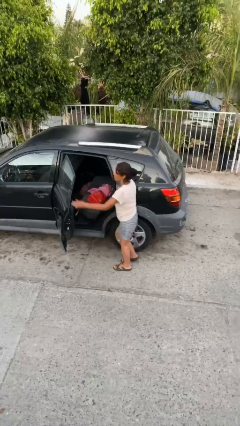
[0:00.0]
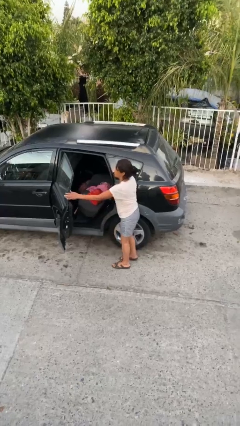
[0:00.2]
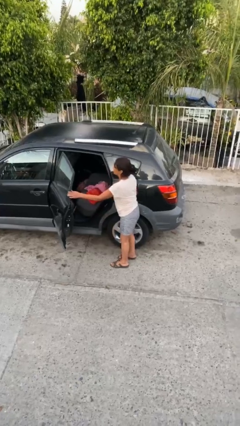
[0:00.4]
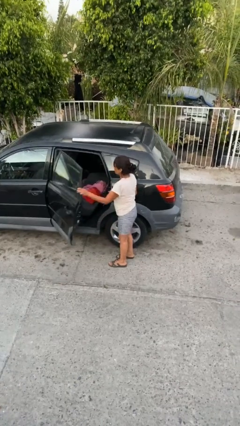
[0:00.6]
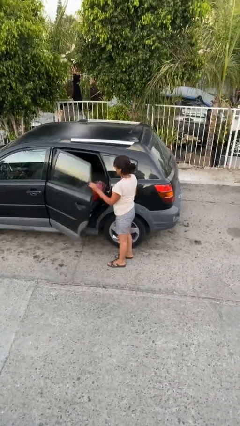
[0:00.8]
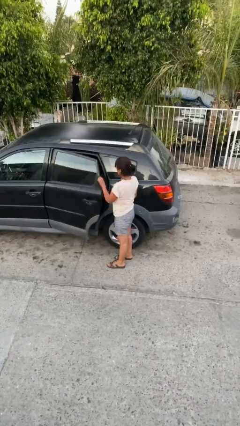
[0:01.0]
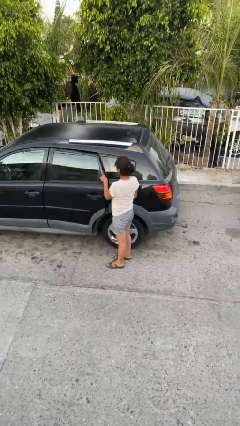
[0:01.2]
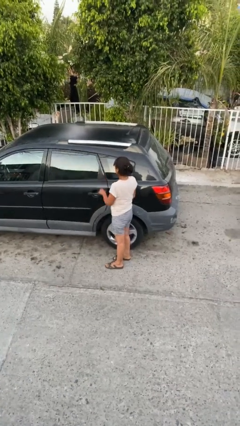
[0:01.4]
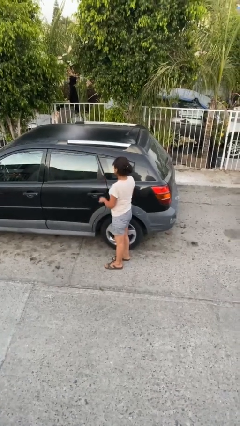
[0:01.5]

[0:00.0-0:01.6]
person closes car door

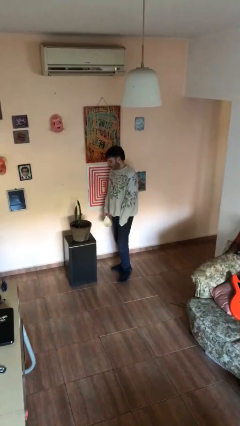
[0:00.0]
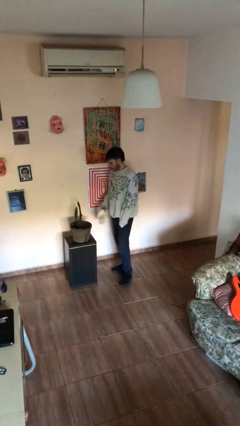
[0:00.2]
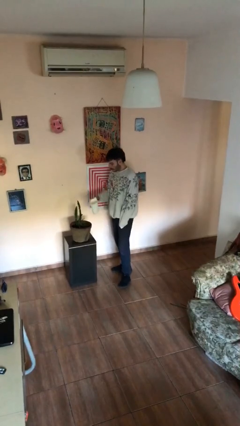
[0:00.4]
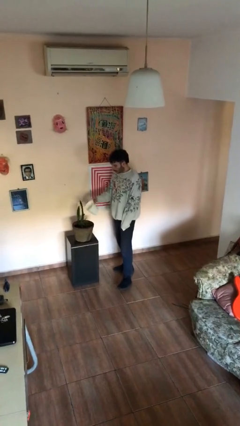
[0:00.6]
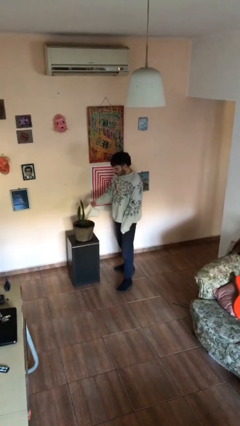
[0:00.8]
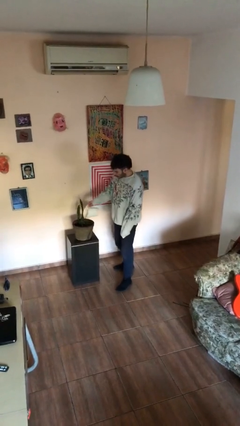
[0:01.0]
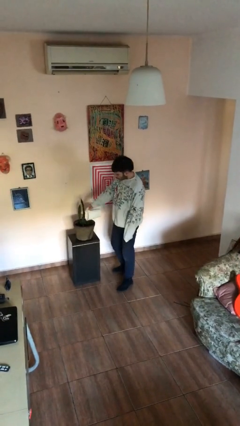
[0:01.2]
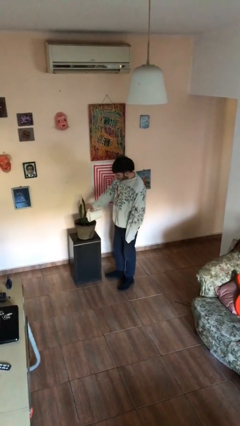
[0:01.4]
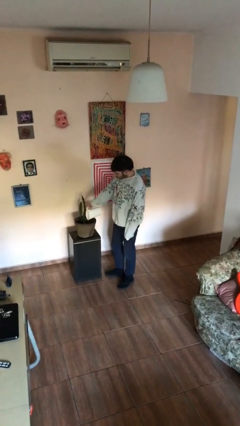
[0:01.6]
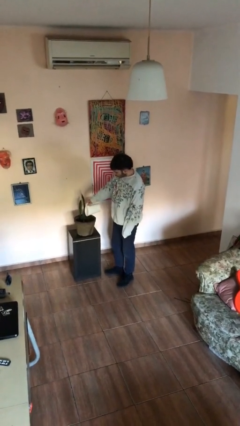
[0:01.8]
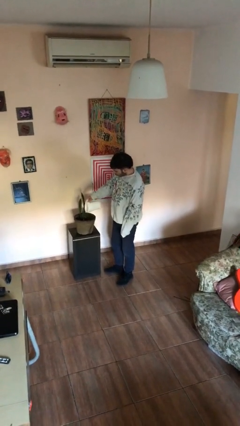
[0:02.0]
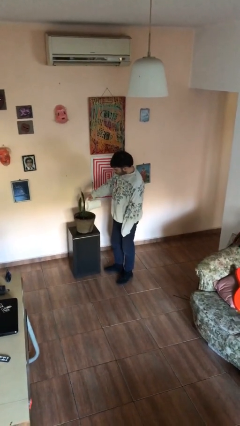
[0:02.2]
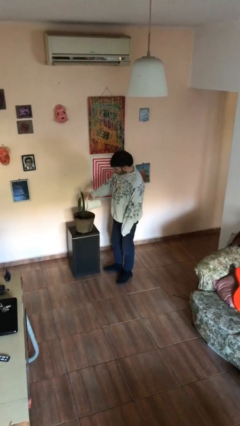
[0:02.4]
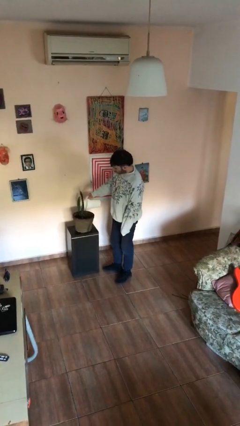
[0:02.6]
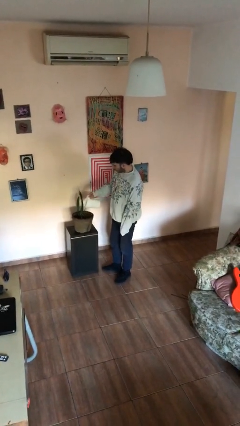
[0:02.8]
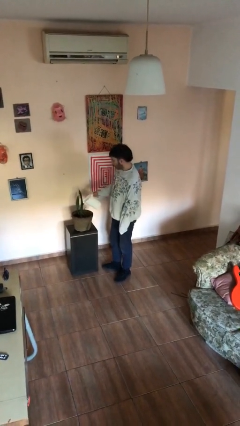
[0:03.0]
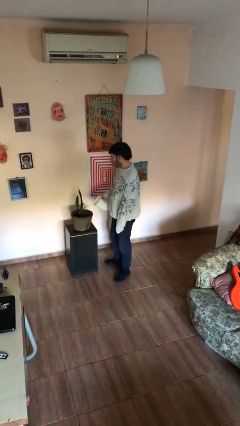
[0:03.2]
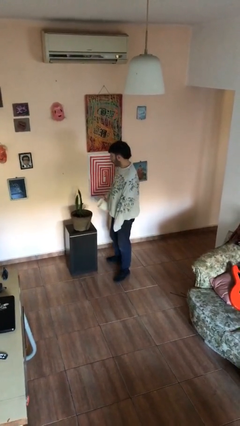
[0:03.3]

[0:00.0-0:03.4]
person waters houseplant

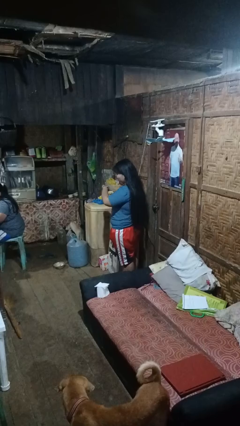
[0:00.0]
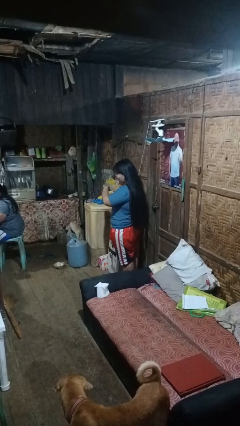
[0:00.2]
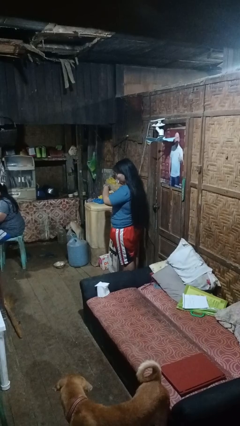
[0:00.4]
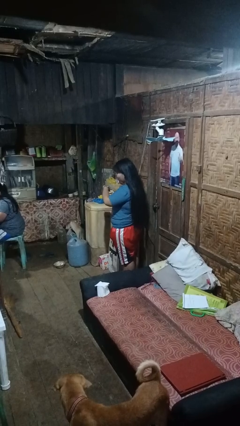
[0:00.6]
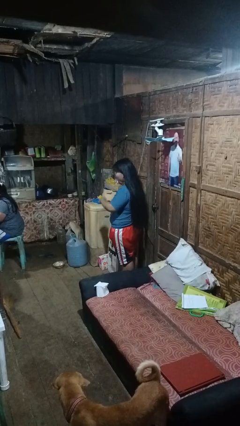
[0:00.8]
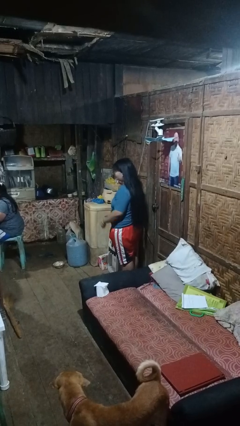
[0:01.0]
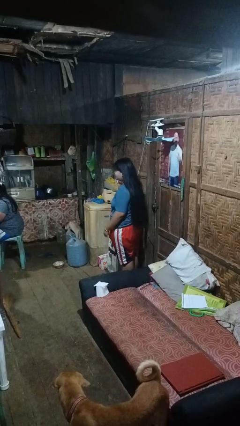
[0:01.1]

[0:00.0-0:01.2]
person looks at wristwatch

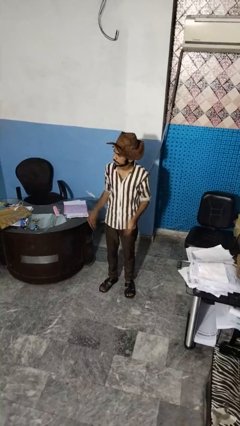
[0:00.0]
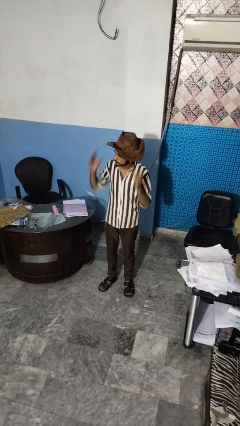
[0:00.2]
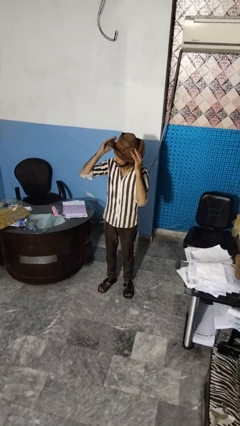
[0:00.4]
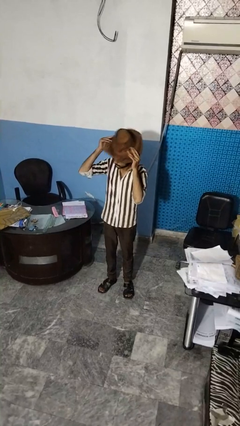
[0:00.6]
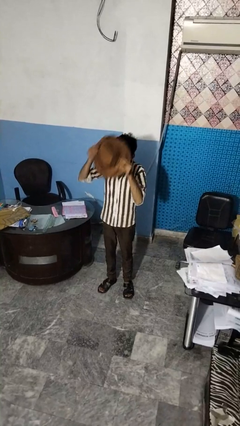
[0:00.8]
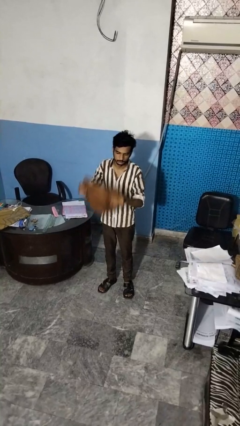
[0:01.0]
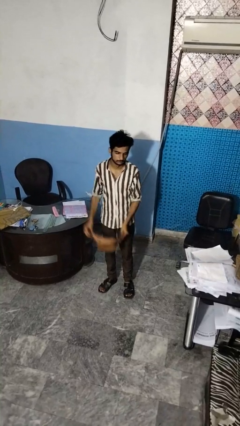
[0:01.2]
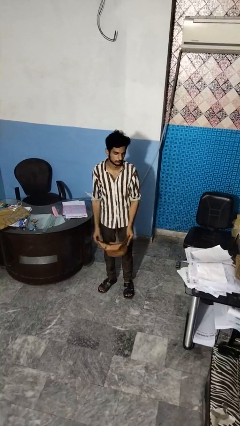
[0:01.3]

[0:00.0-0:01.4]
person takes off hat

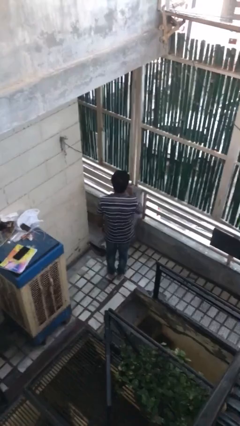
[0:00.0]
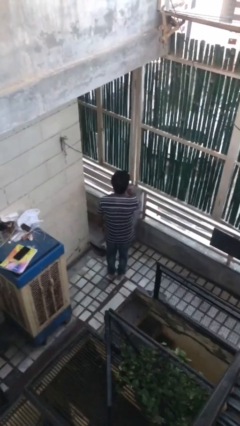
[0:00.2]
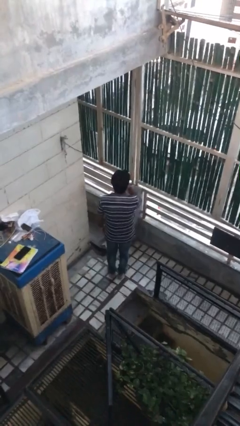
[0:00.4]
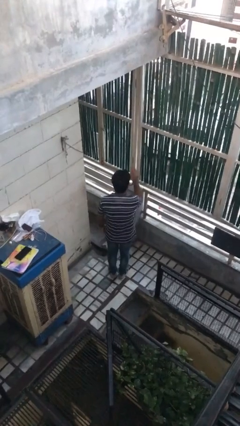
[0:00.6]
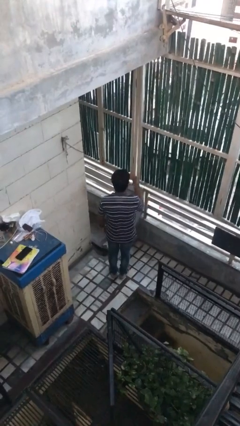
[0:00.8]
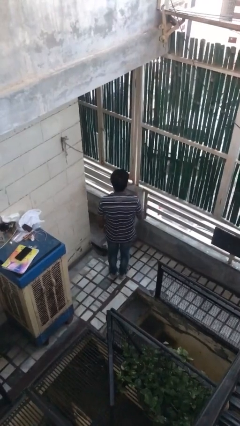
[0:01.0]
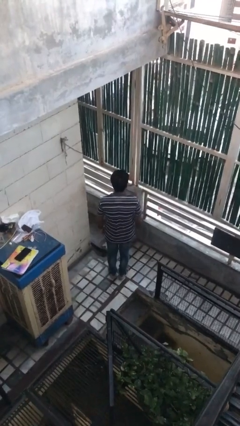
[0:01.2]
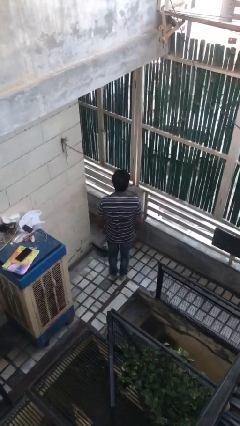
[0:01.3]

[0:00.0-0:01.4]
person gestures blow kiss

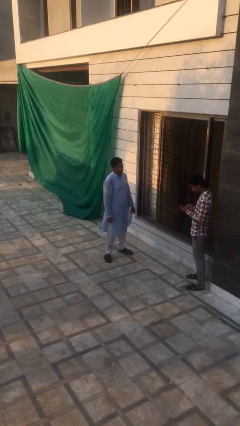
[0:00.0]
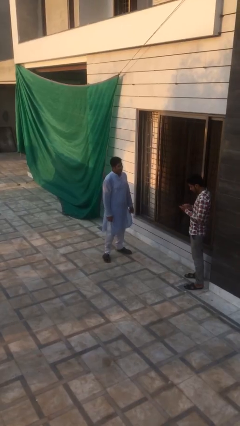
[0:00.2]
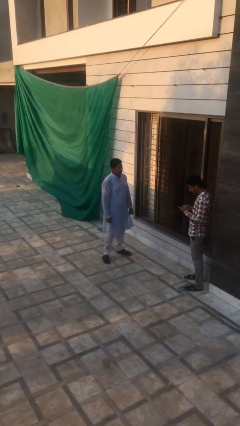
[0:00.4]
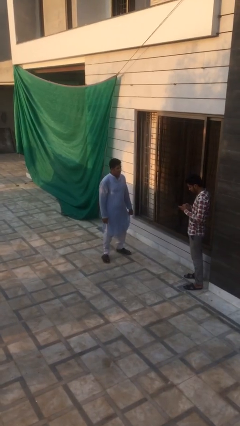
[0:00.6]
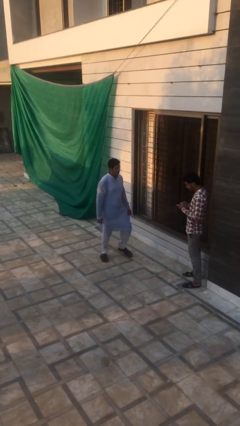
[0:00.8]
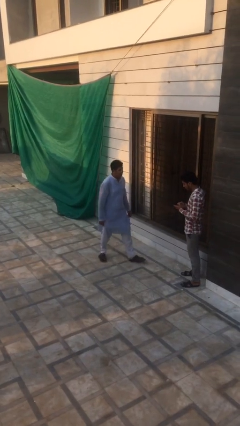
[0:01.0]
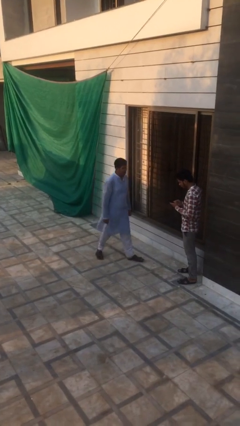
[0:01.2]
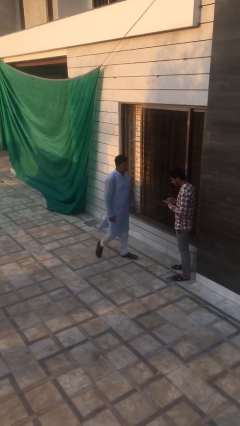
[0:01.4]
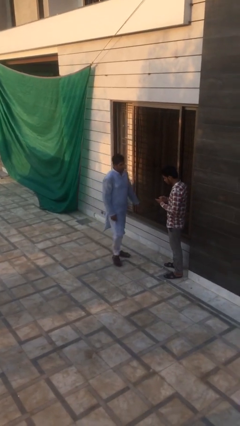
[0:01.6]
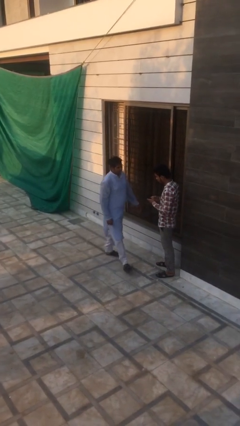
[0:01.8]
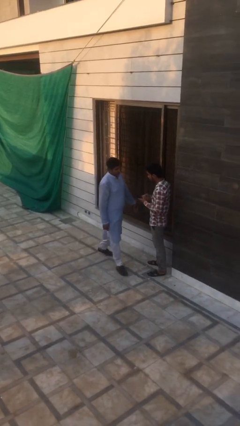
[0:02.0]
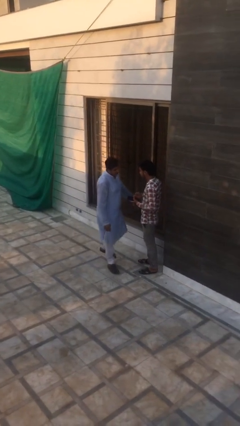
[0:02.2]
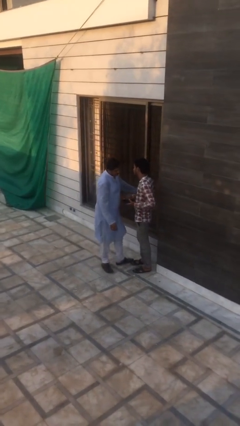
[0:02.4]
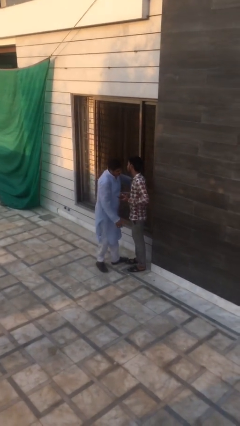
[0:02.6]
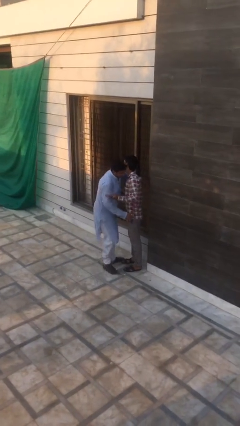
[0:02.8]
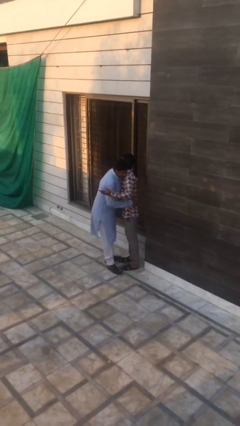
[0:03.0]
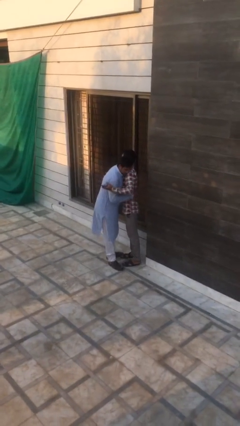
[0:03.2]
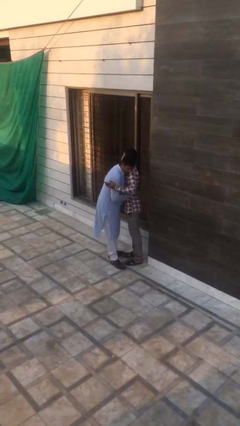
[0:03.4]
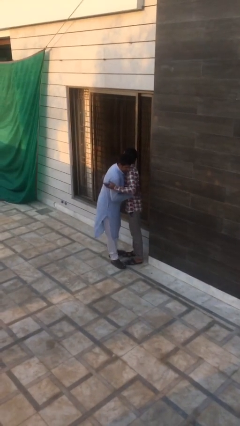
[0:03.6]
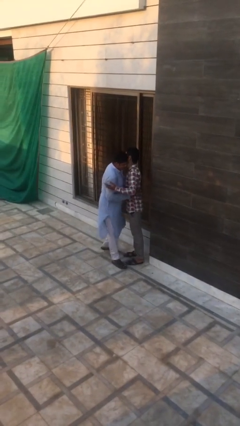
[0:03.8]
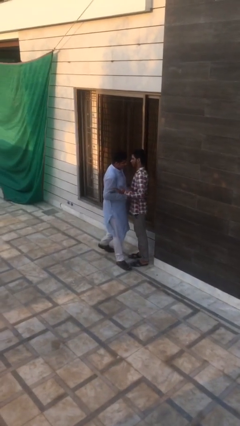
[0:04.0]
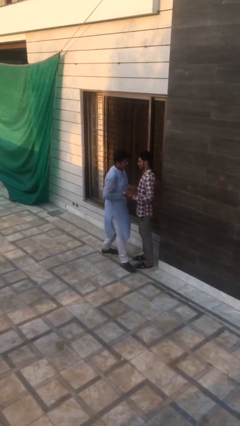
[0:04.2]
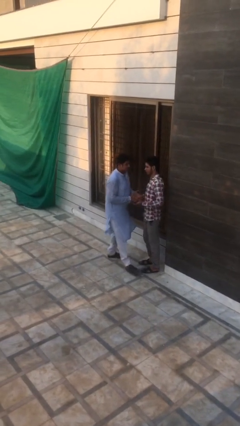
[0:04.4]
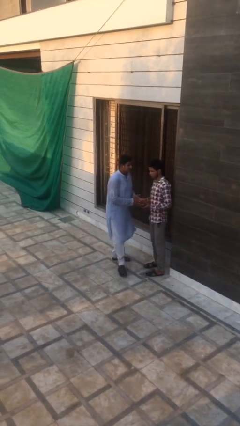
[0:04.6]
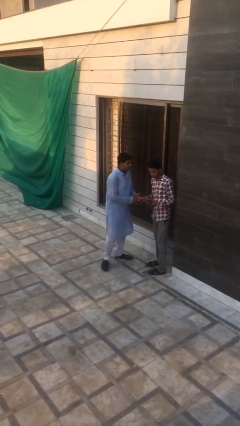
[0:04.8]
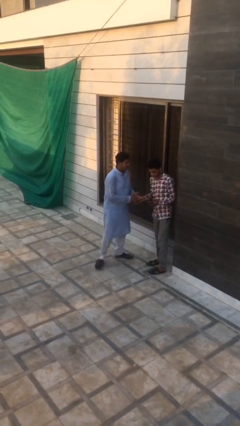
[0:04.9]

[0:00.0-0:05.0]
person embraces person

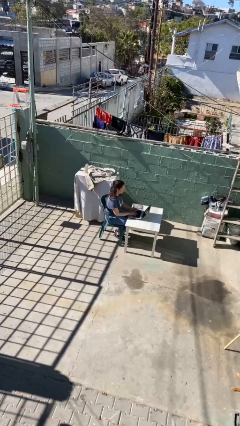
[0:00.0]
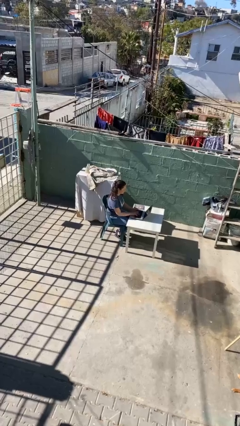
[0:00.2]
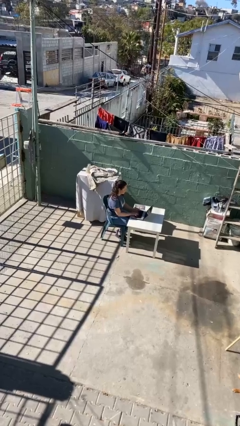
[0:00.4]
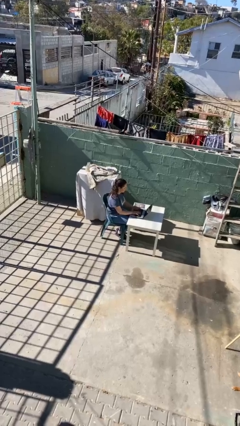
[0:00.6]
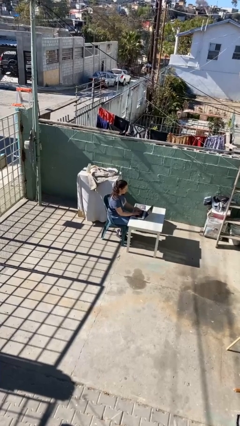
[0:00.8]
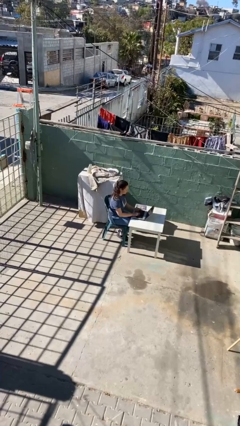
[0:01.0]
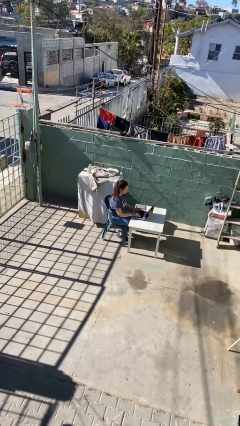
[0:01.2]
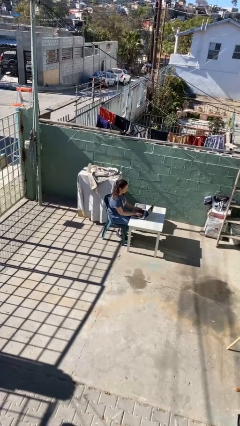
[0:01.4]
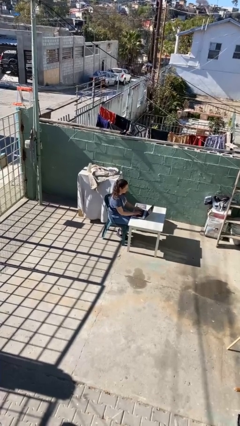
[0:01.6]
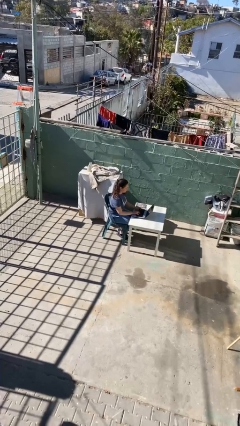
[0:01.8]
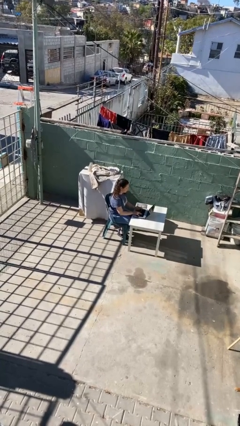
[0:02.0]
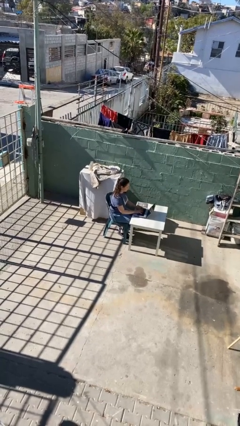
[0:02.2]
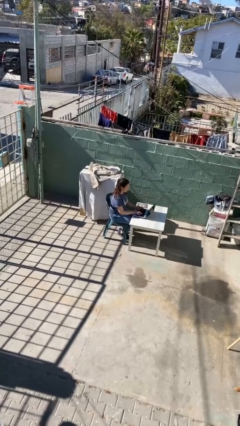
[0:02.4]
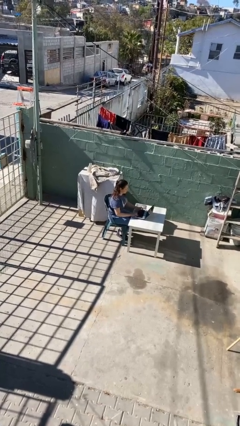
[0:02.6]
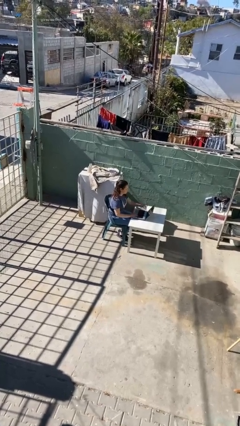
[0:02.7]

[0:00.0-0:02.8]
person interacts with laptop
